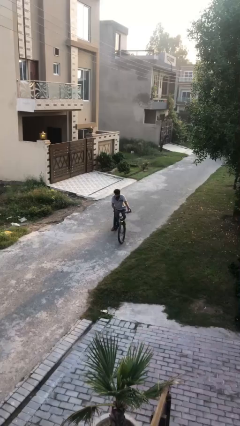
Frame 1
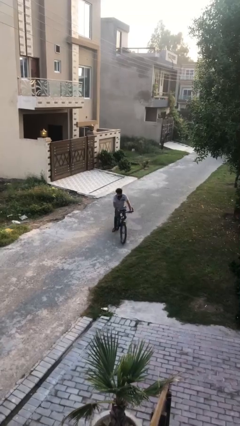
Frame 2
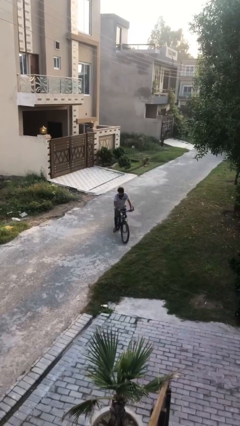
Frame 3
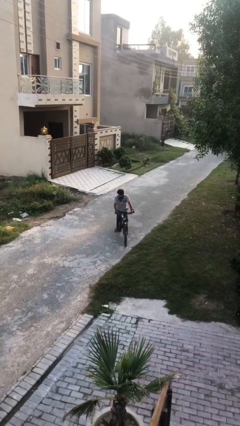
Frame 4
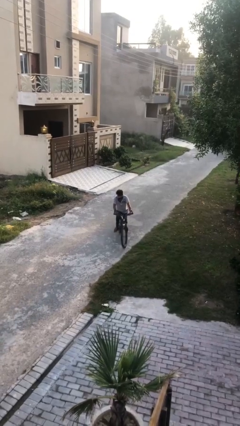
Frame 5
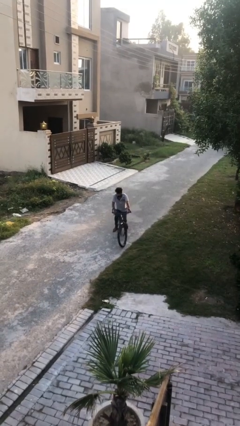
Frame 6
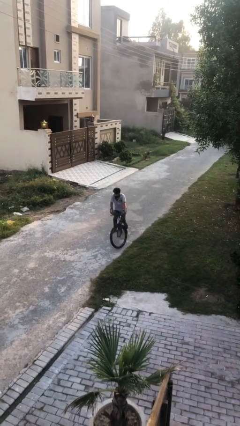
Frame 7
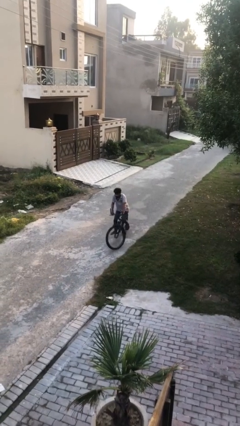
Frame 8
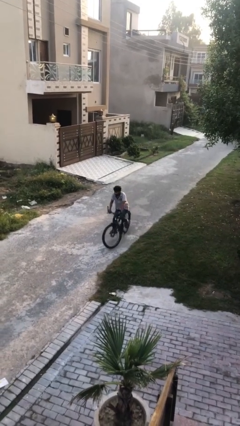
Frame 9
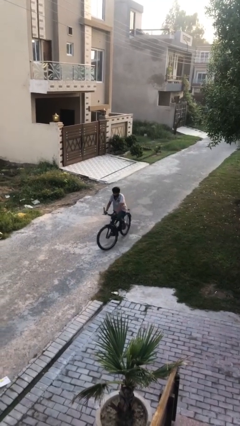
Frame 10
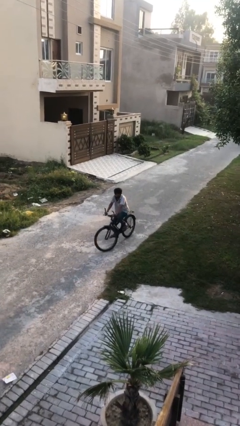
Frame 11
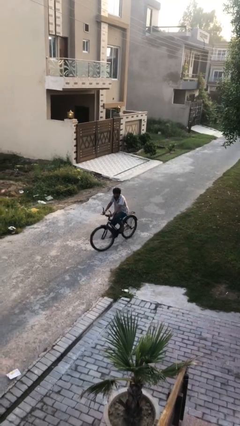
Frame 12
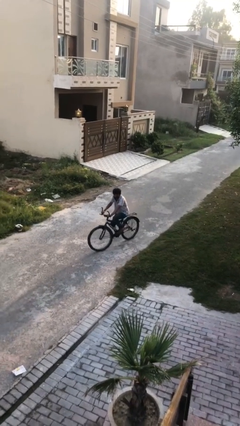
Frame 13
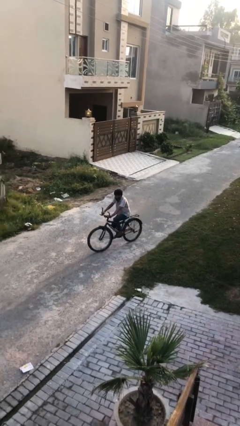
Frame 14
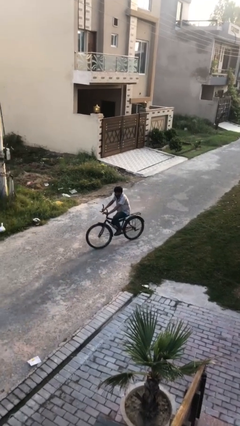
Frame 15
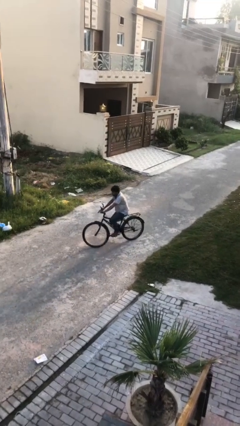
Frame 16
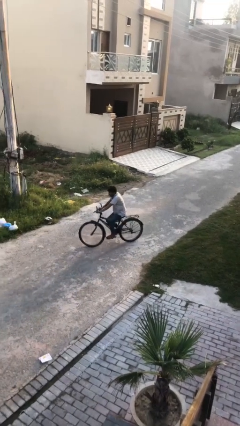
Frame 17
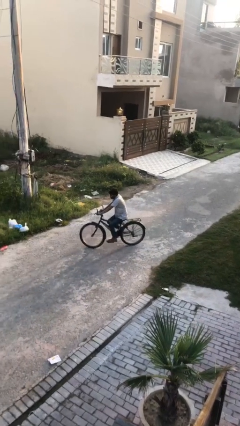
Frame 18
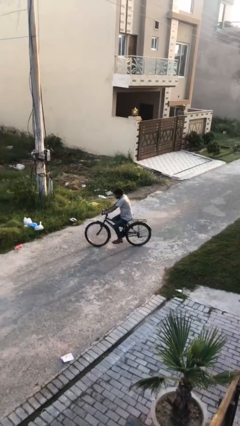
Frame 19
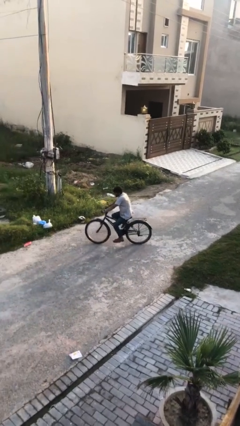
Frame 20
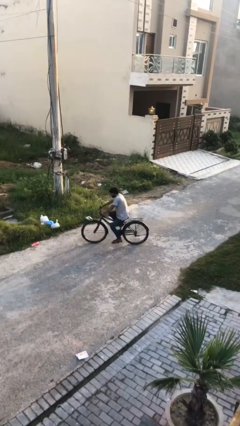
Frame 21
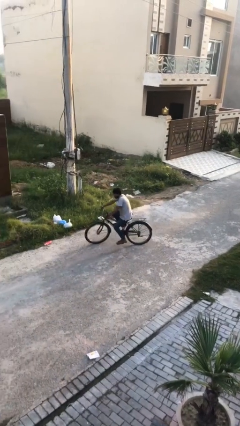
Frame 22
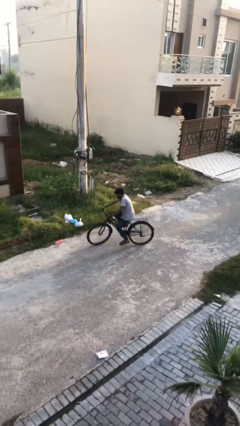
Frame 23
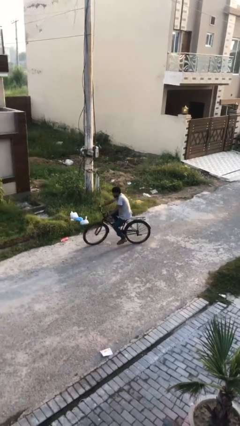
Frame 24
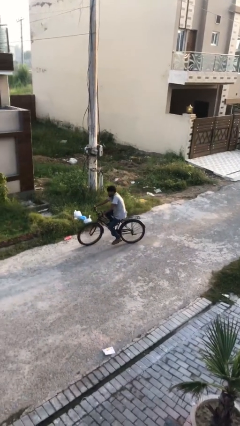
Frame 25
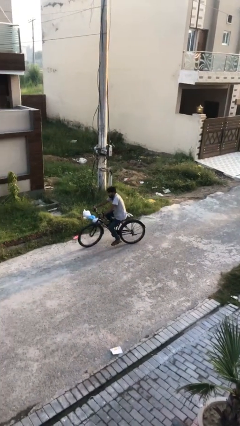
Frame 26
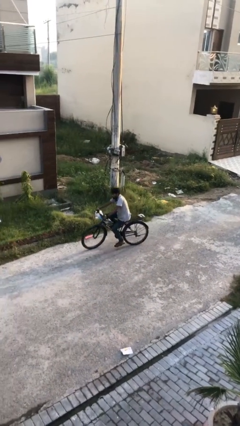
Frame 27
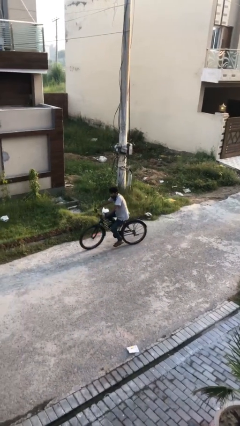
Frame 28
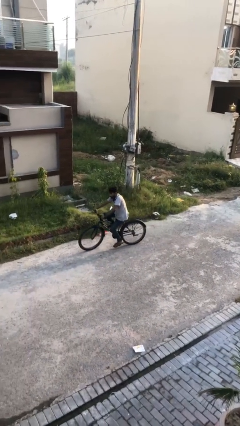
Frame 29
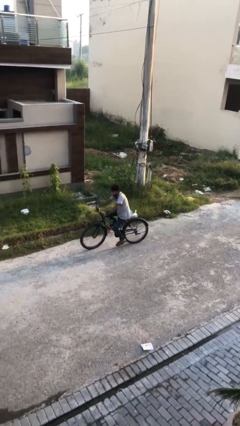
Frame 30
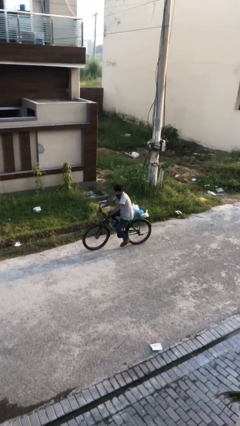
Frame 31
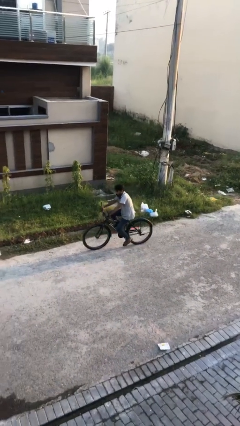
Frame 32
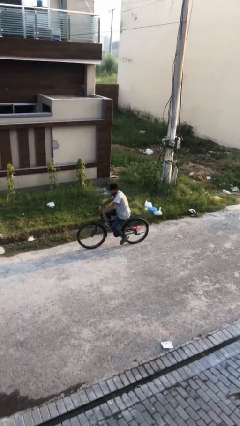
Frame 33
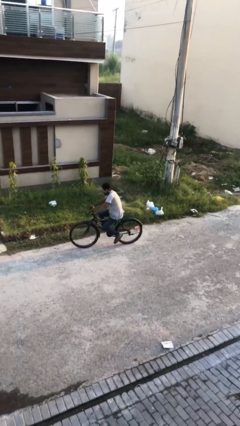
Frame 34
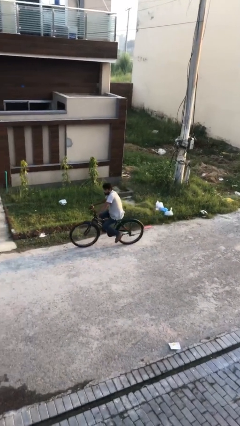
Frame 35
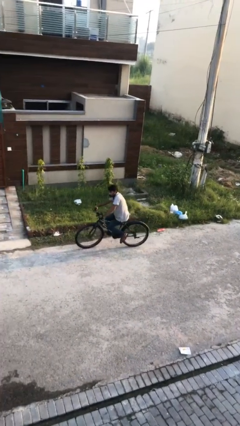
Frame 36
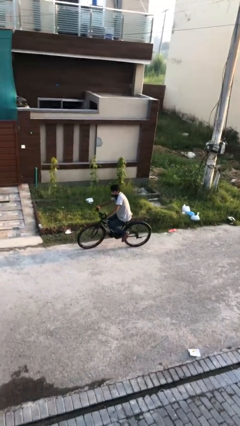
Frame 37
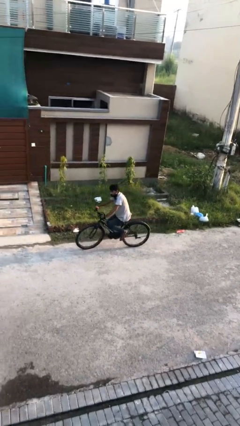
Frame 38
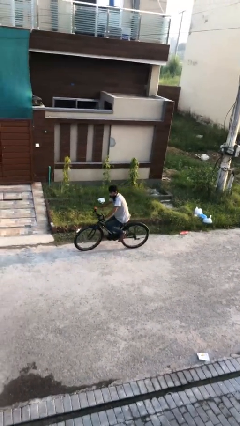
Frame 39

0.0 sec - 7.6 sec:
person rides bicycle

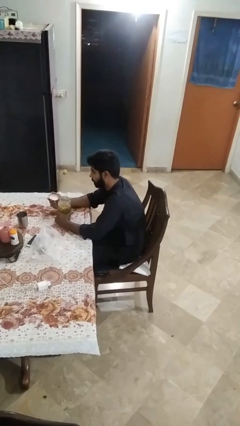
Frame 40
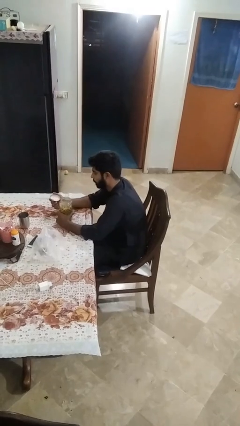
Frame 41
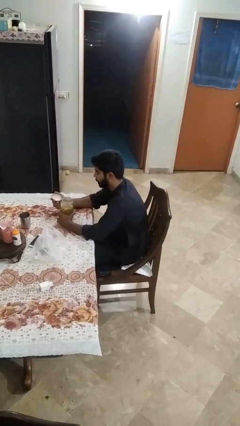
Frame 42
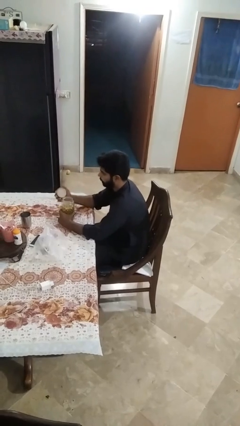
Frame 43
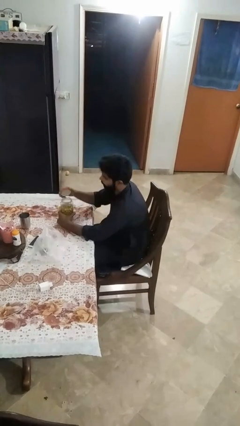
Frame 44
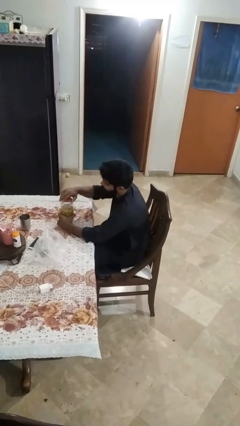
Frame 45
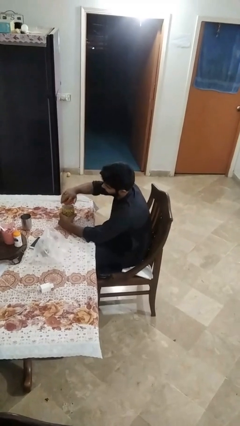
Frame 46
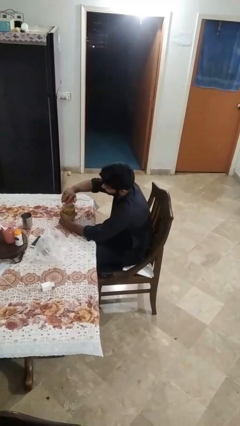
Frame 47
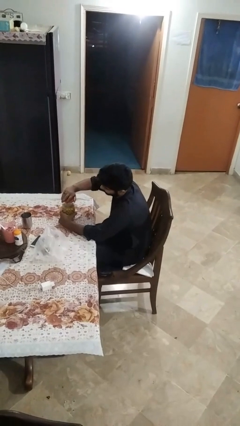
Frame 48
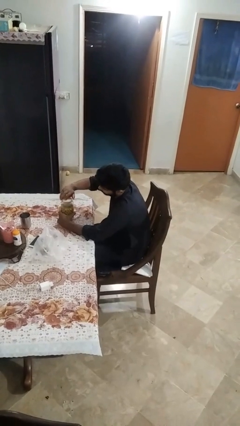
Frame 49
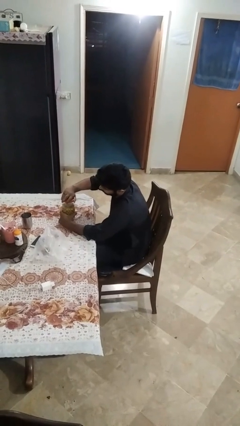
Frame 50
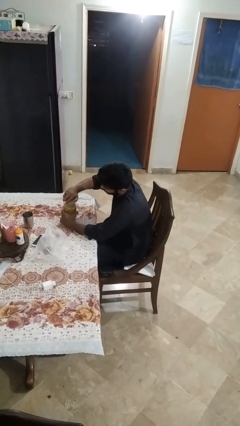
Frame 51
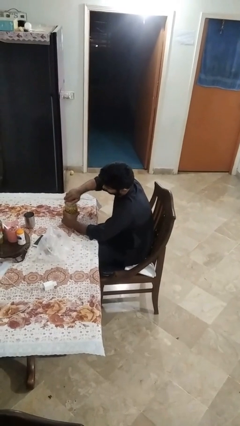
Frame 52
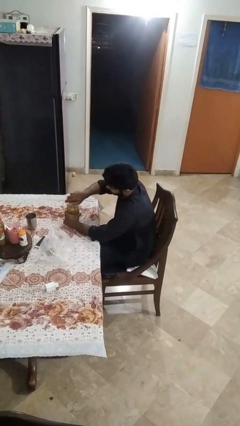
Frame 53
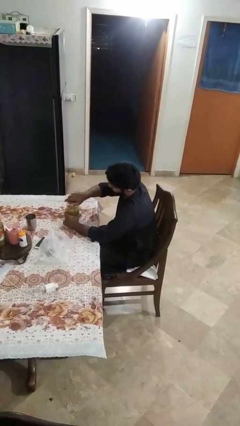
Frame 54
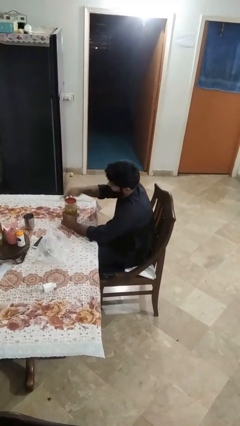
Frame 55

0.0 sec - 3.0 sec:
person closes jar

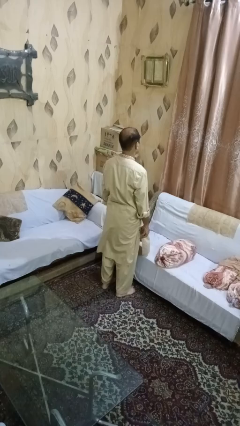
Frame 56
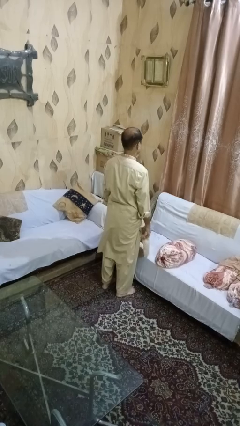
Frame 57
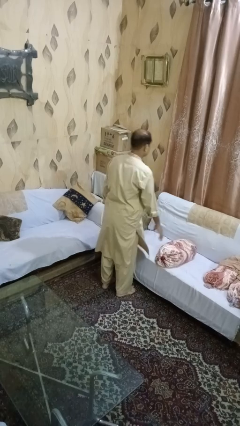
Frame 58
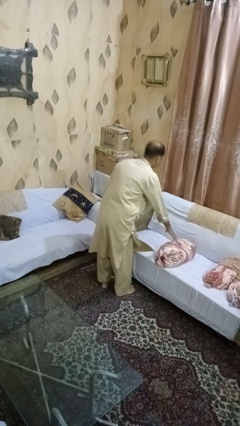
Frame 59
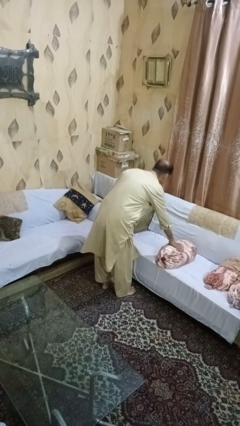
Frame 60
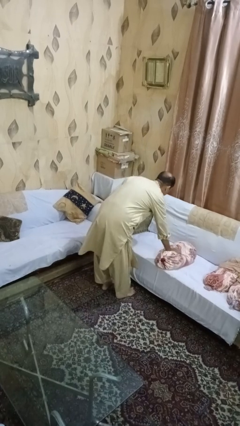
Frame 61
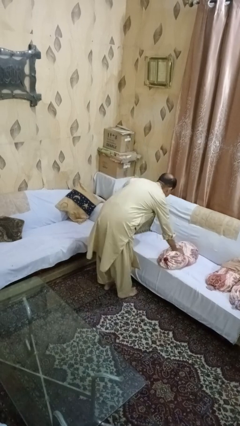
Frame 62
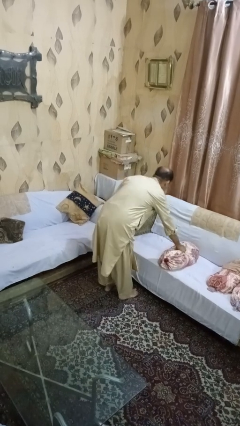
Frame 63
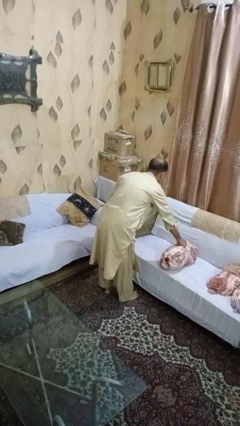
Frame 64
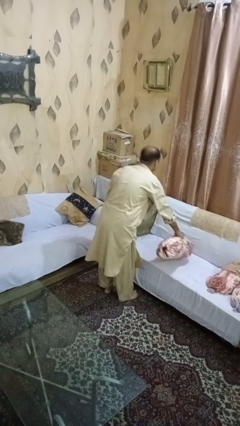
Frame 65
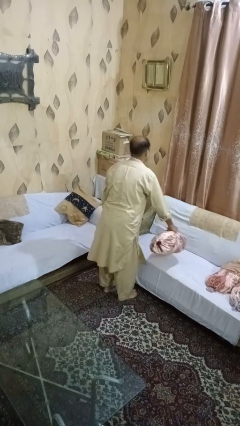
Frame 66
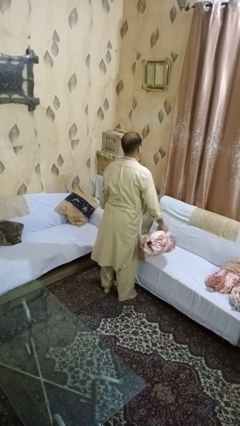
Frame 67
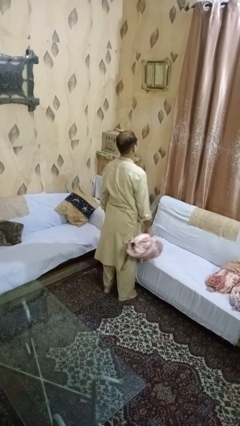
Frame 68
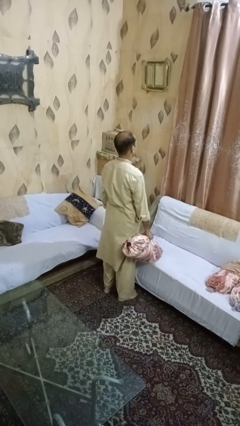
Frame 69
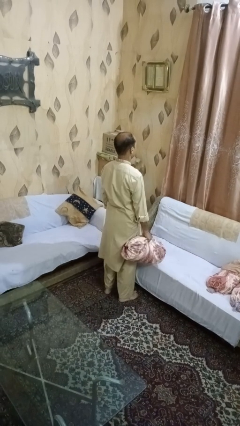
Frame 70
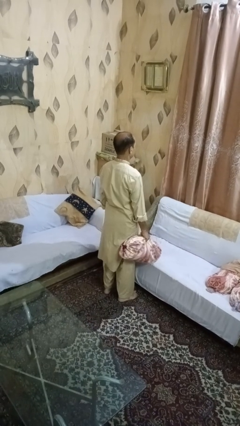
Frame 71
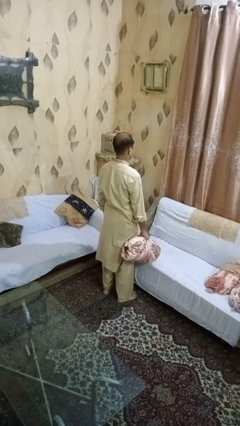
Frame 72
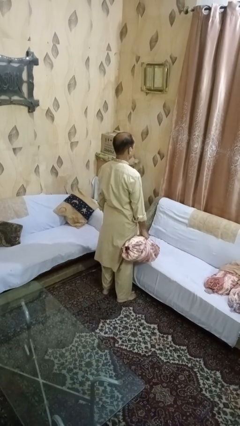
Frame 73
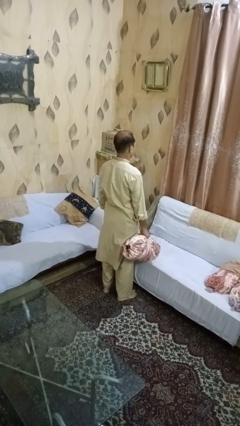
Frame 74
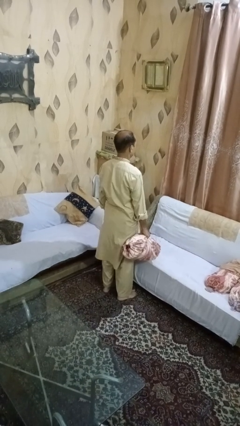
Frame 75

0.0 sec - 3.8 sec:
person picks up object from couch

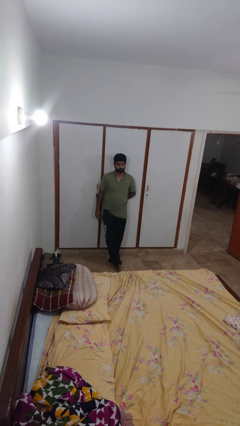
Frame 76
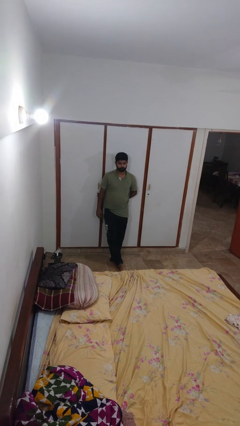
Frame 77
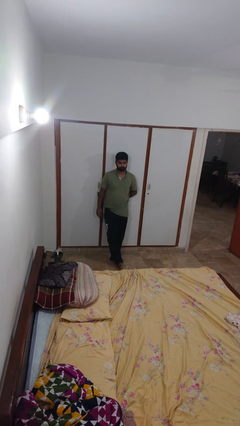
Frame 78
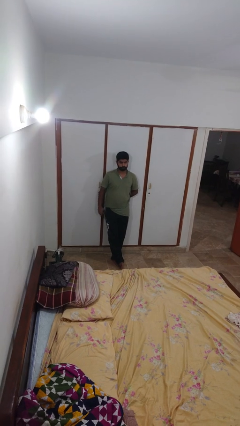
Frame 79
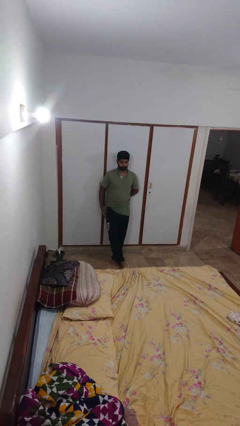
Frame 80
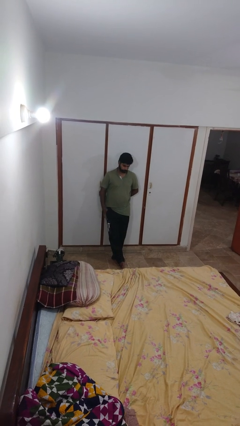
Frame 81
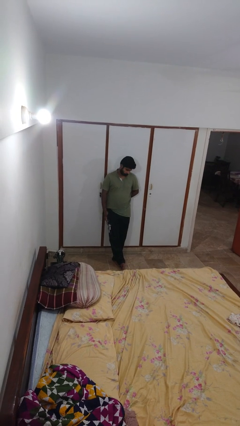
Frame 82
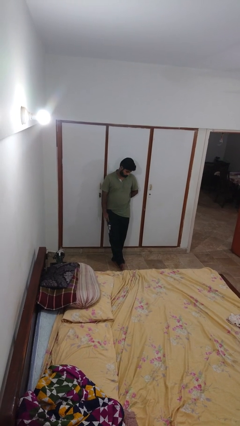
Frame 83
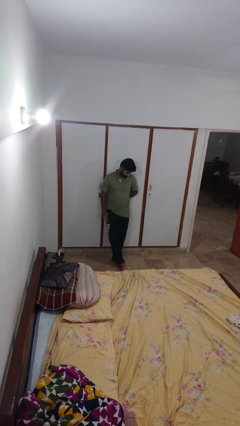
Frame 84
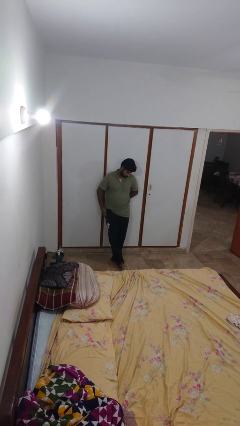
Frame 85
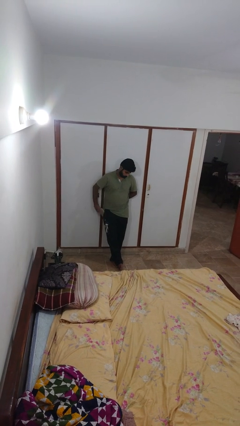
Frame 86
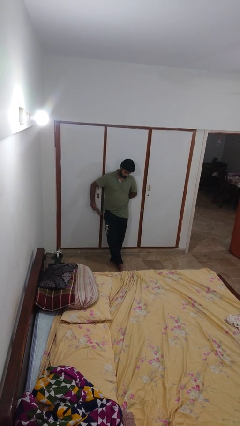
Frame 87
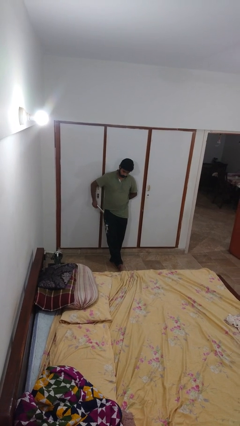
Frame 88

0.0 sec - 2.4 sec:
person takes phone from pocket

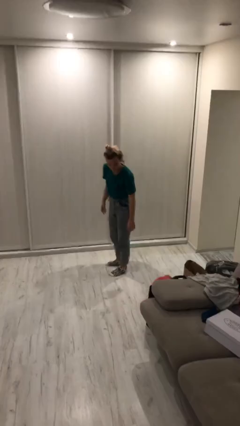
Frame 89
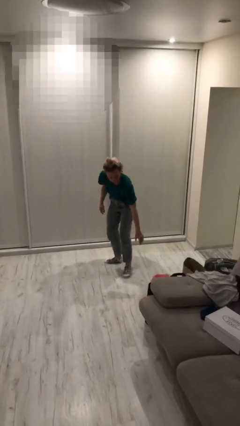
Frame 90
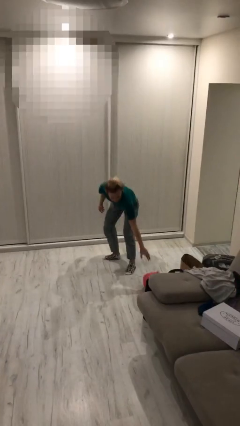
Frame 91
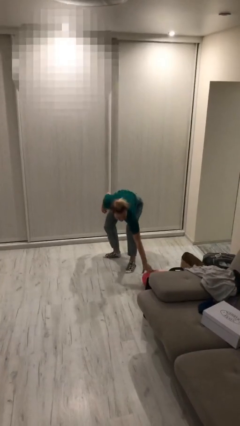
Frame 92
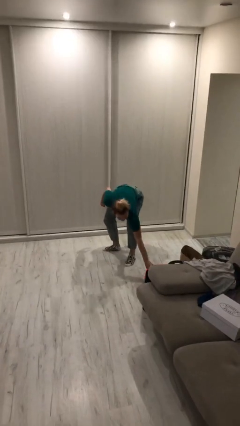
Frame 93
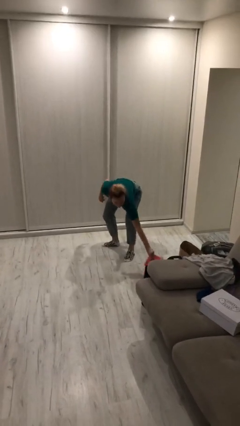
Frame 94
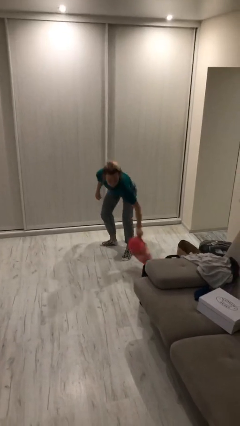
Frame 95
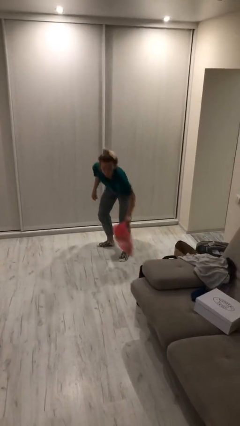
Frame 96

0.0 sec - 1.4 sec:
person picks up object from floor
